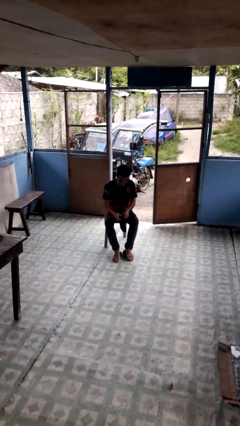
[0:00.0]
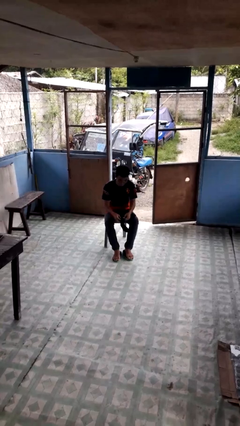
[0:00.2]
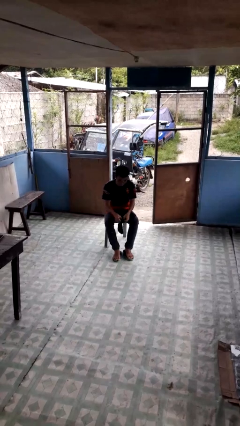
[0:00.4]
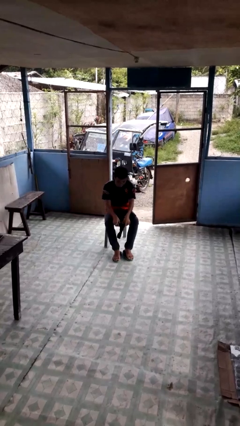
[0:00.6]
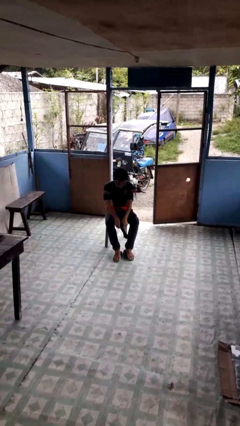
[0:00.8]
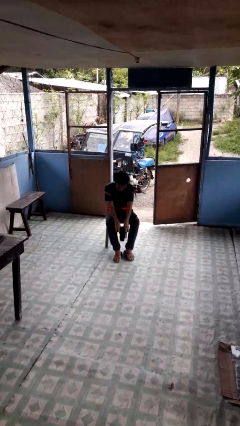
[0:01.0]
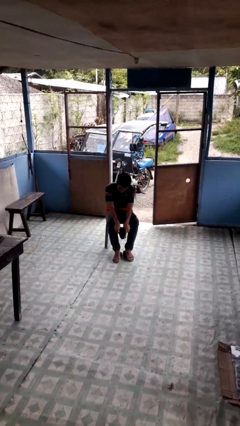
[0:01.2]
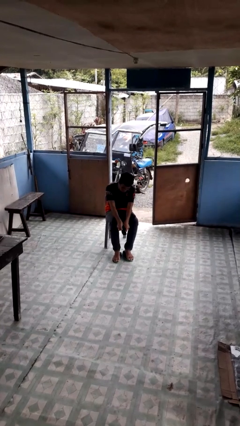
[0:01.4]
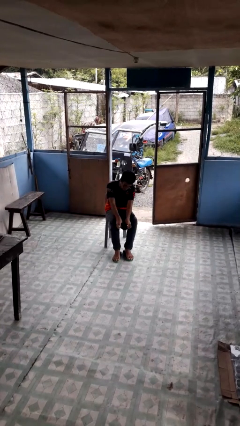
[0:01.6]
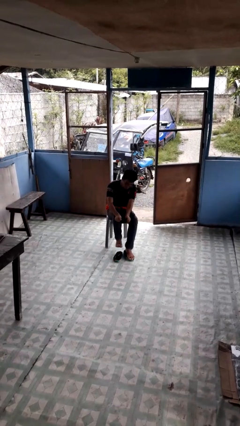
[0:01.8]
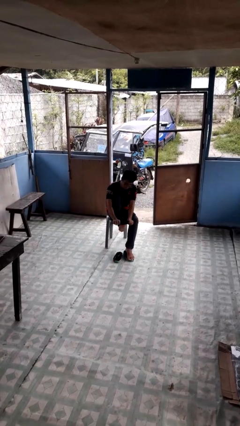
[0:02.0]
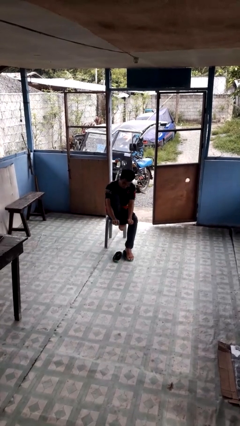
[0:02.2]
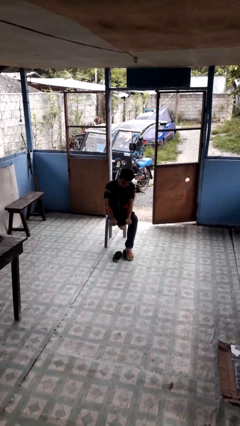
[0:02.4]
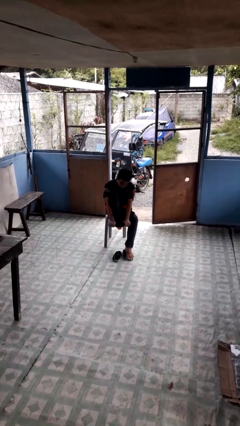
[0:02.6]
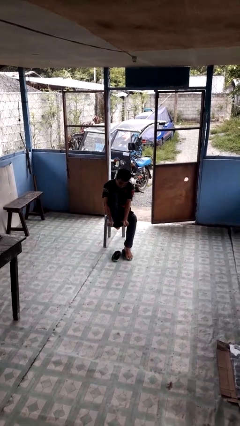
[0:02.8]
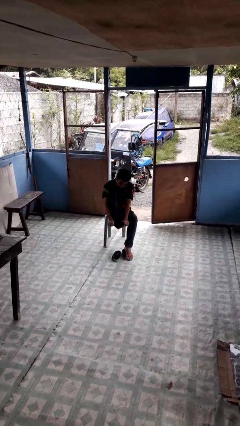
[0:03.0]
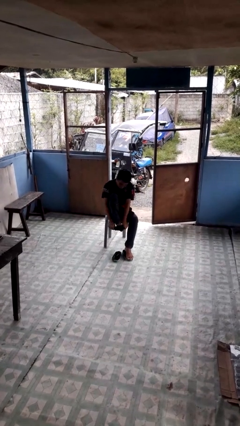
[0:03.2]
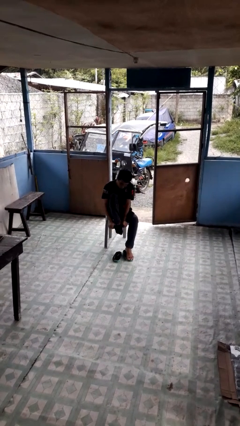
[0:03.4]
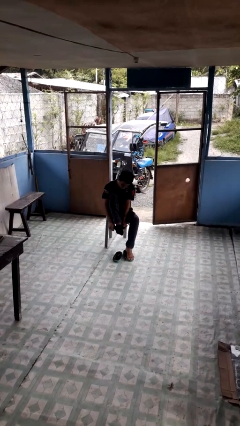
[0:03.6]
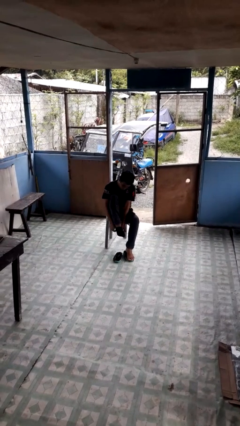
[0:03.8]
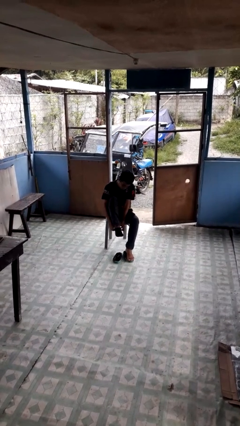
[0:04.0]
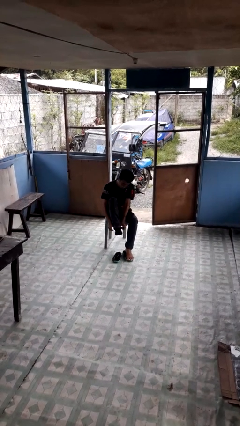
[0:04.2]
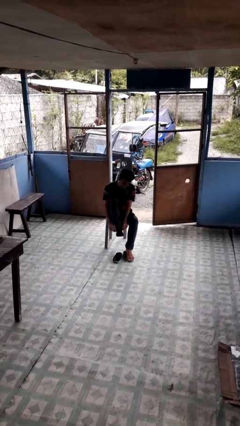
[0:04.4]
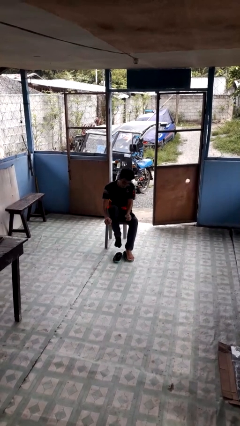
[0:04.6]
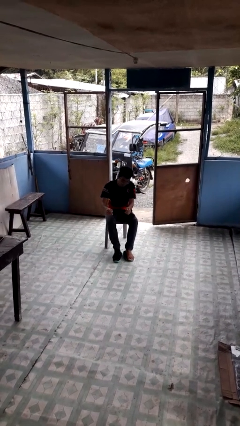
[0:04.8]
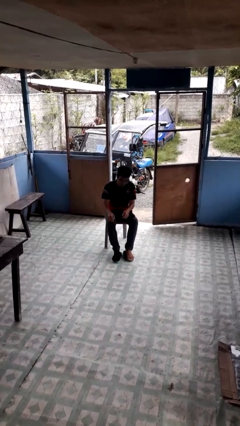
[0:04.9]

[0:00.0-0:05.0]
person puts on socks

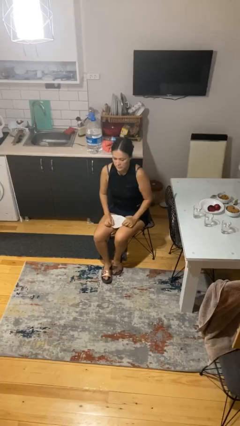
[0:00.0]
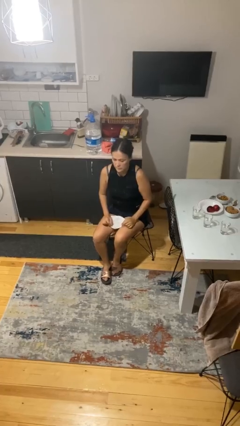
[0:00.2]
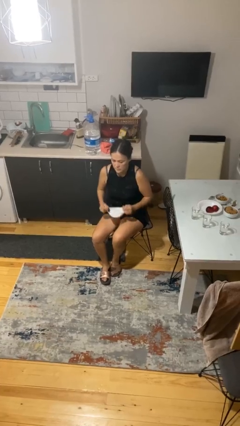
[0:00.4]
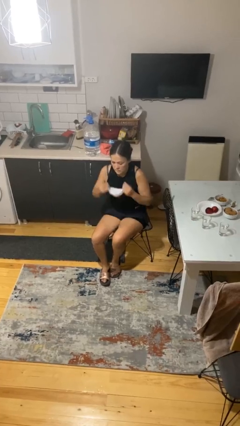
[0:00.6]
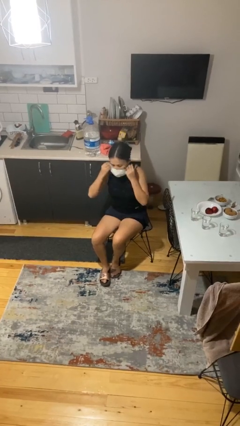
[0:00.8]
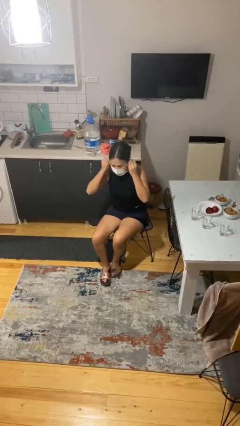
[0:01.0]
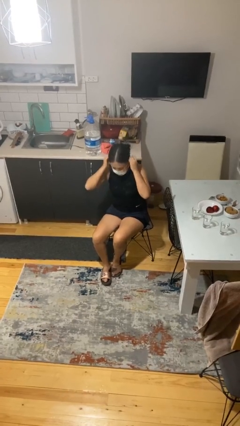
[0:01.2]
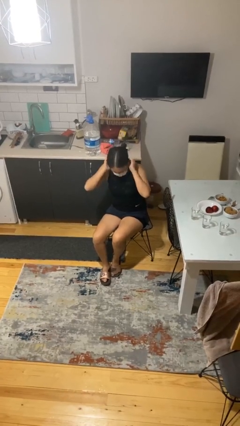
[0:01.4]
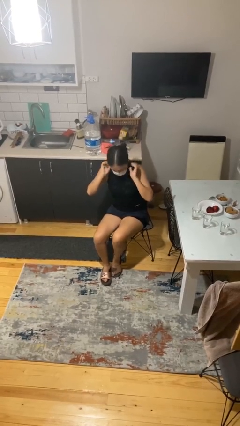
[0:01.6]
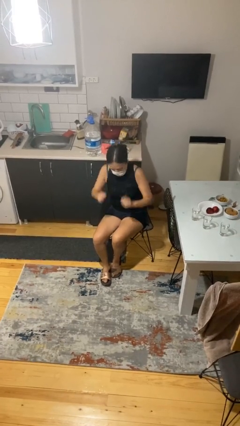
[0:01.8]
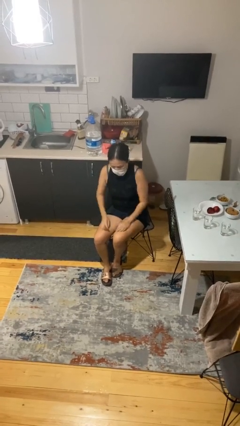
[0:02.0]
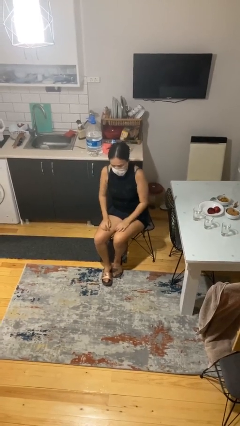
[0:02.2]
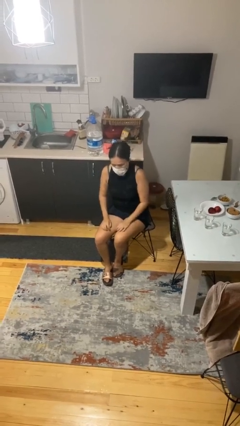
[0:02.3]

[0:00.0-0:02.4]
person puts on facemask

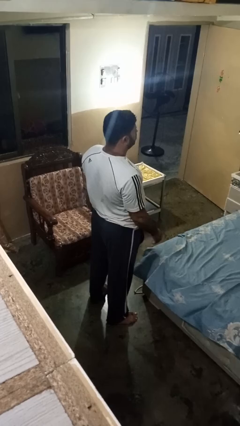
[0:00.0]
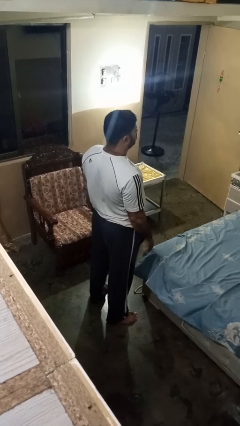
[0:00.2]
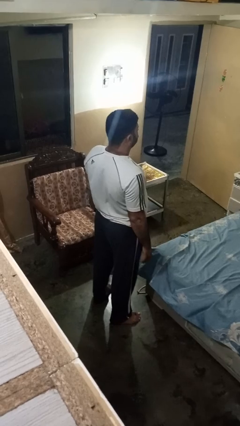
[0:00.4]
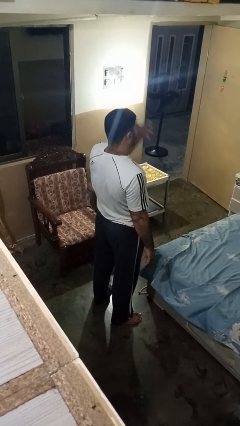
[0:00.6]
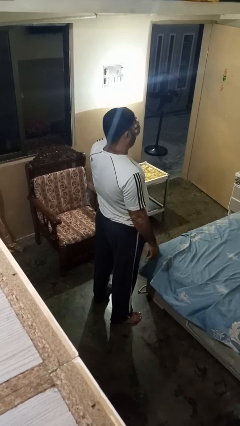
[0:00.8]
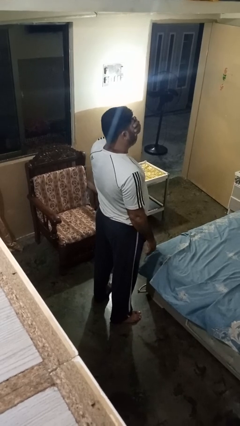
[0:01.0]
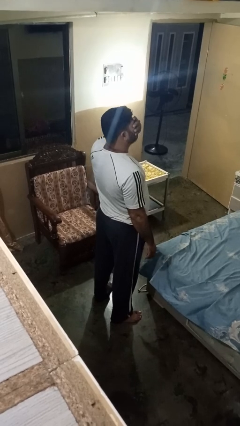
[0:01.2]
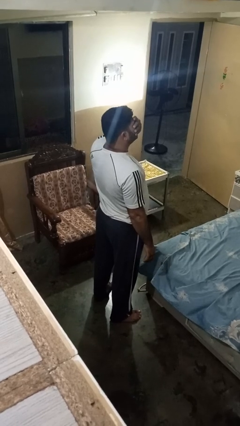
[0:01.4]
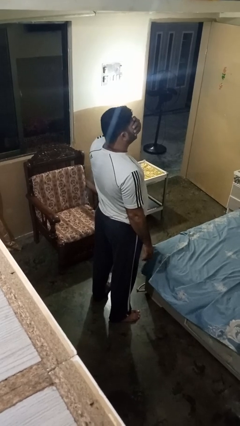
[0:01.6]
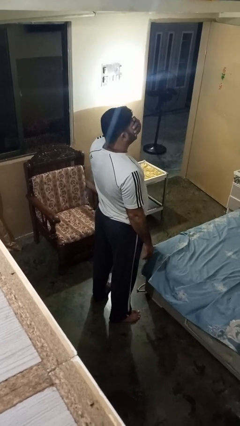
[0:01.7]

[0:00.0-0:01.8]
person covers face with hands

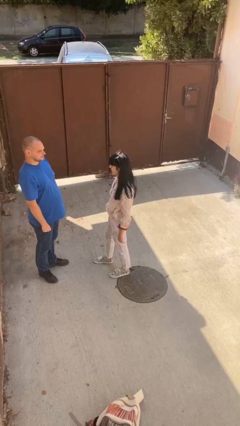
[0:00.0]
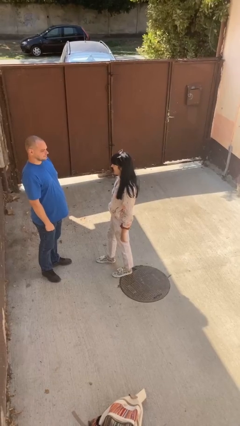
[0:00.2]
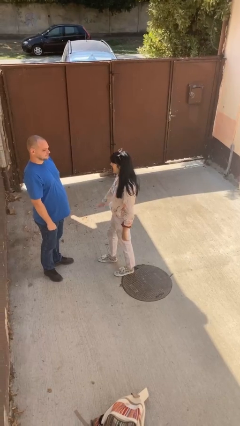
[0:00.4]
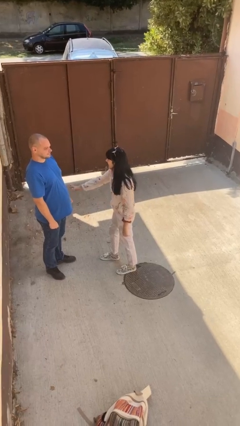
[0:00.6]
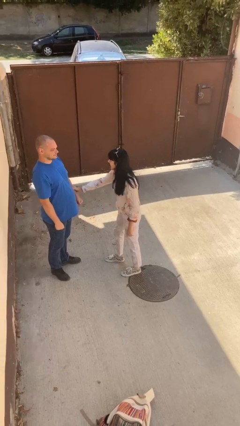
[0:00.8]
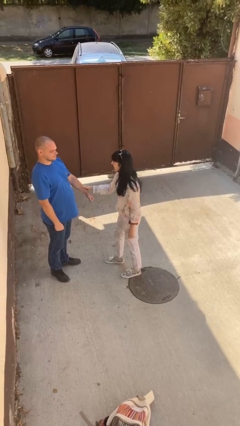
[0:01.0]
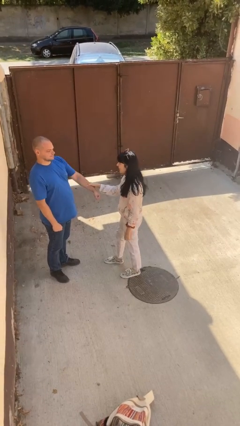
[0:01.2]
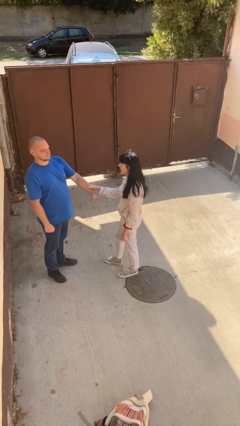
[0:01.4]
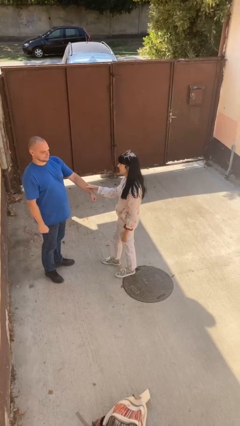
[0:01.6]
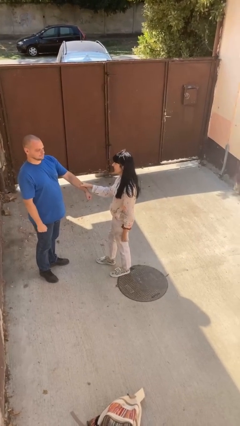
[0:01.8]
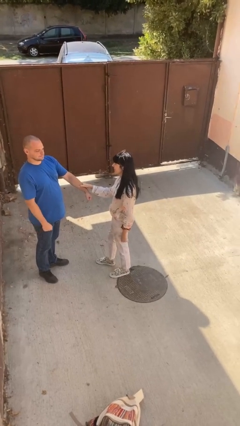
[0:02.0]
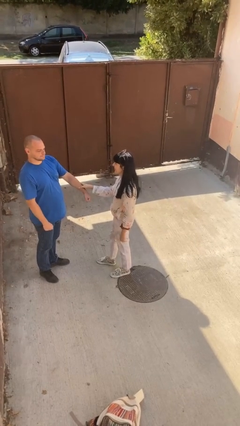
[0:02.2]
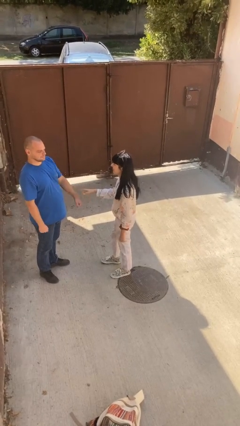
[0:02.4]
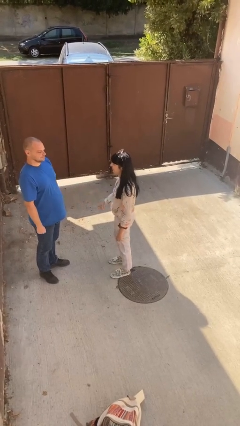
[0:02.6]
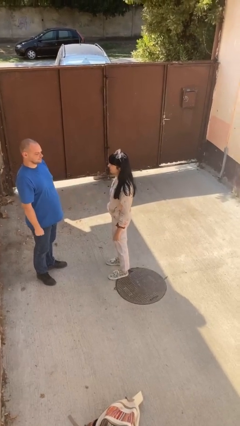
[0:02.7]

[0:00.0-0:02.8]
person grabs person by forearm

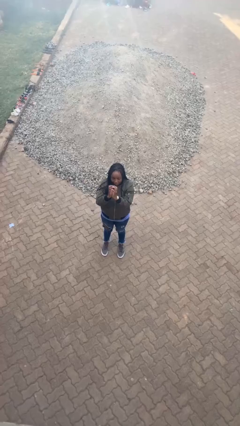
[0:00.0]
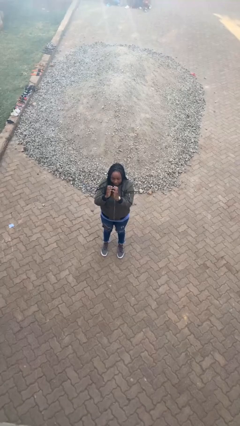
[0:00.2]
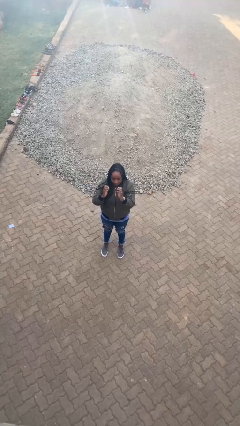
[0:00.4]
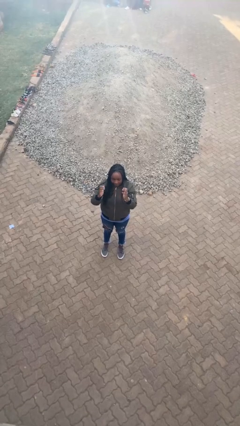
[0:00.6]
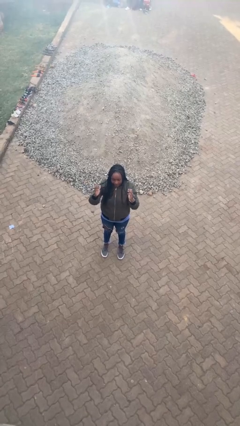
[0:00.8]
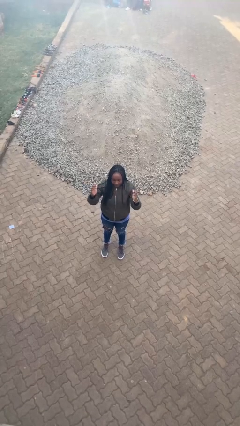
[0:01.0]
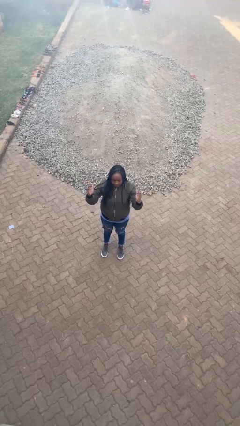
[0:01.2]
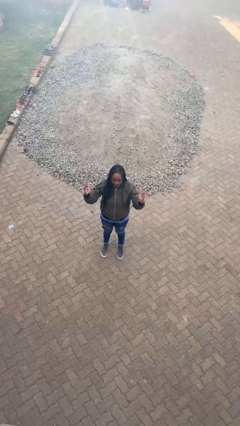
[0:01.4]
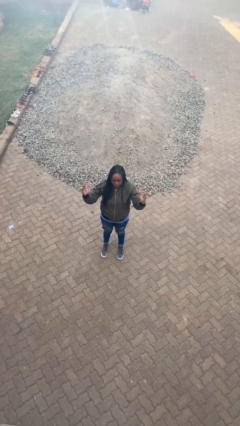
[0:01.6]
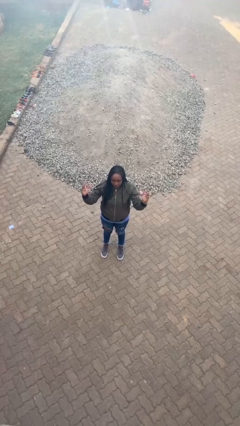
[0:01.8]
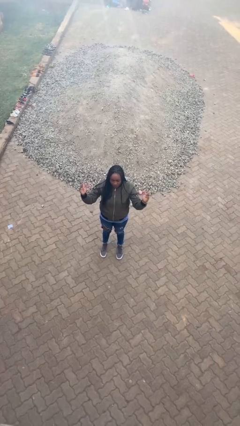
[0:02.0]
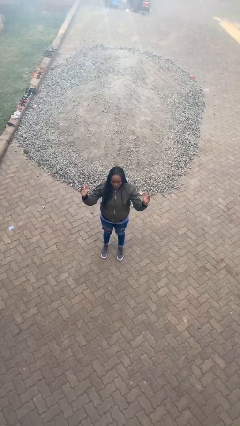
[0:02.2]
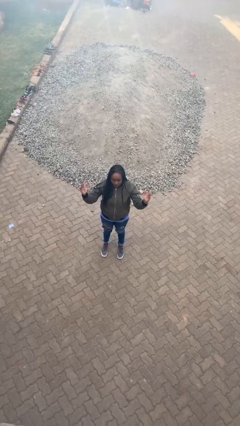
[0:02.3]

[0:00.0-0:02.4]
person gestures zoom out

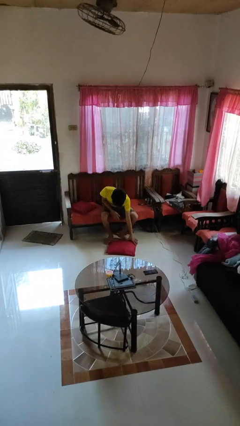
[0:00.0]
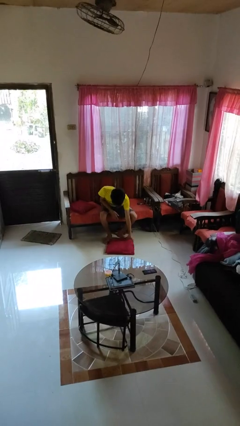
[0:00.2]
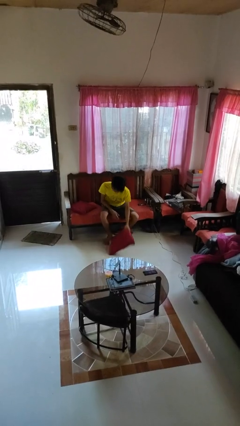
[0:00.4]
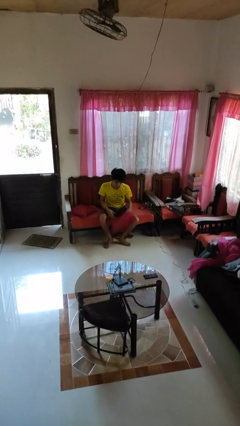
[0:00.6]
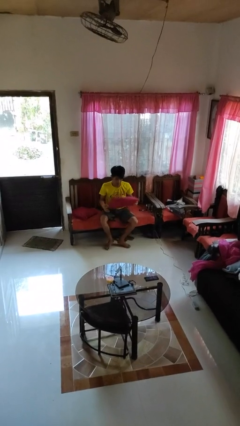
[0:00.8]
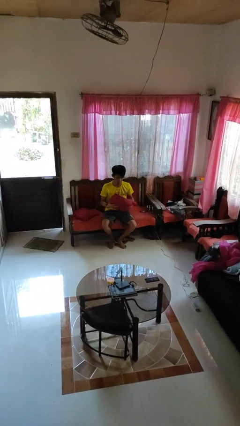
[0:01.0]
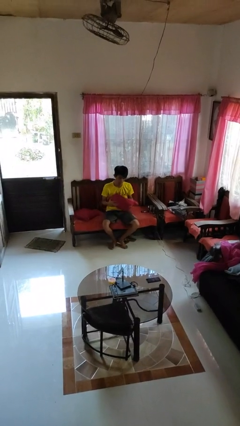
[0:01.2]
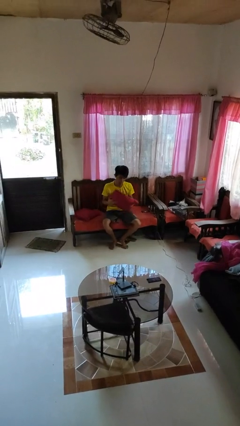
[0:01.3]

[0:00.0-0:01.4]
person picks up object from floor

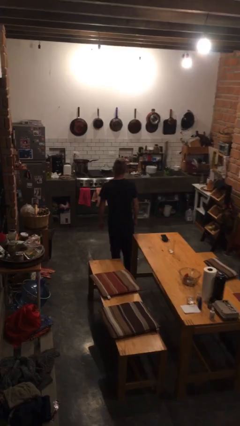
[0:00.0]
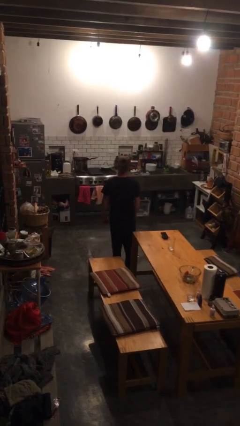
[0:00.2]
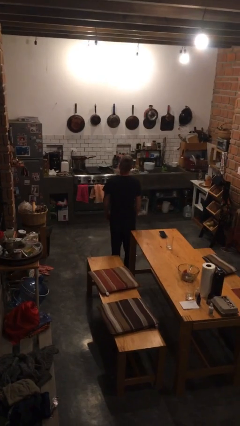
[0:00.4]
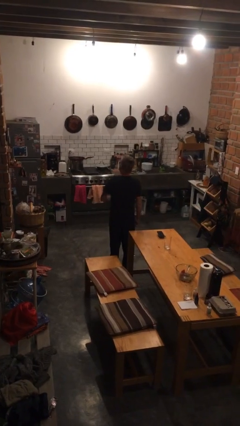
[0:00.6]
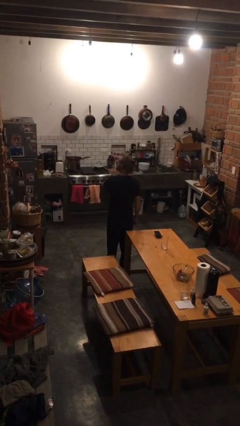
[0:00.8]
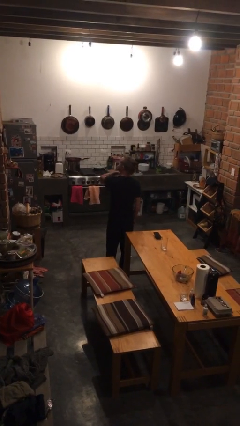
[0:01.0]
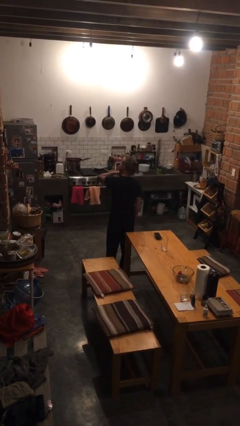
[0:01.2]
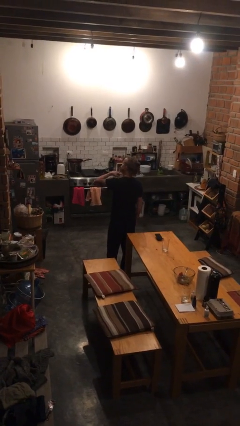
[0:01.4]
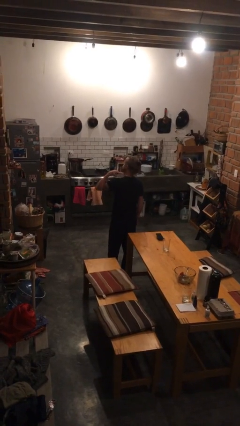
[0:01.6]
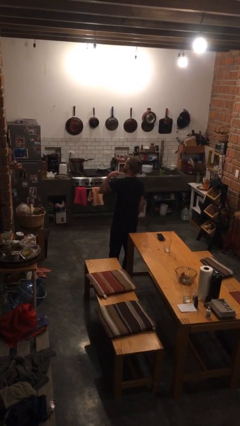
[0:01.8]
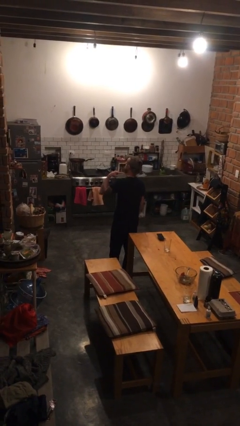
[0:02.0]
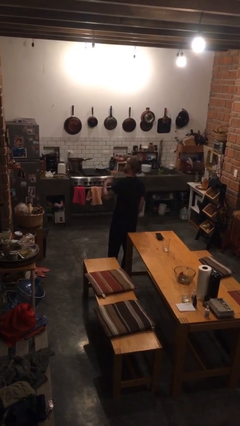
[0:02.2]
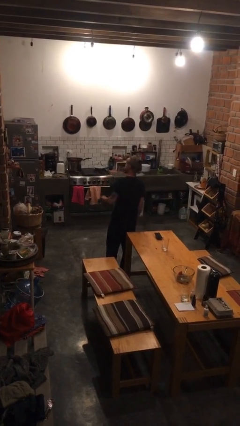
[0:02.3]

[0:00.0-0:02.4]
person gestures cut
